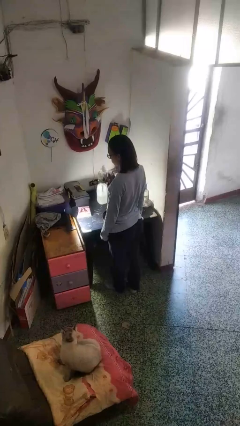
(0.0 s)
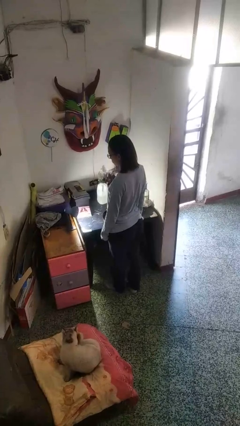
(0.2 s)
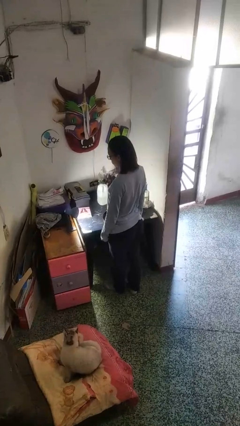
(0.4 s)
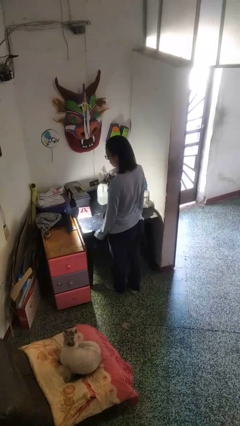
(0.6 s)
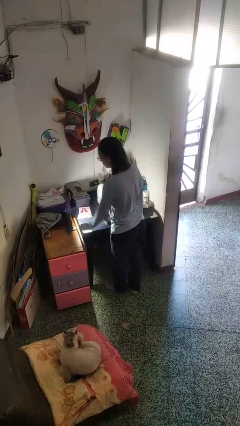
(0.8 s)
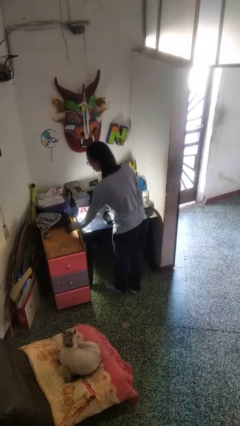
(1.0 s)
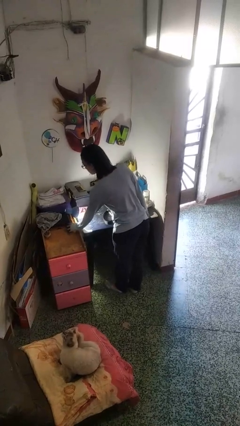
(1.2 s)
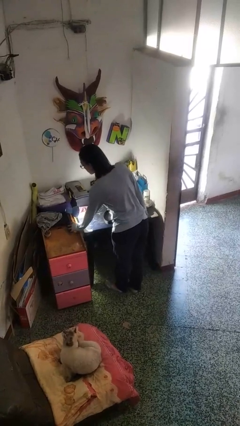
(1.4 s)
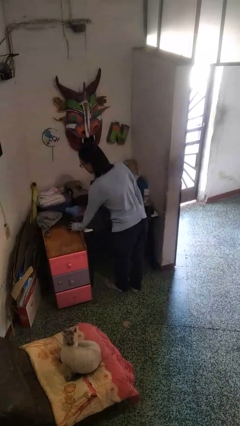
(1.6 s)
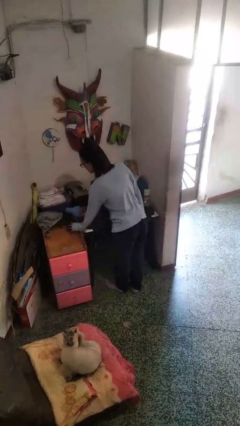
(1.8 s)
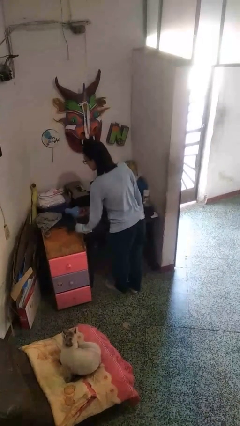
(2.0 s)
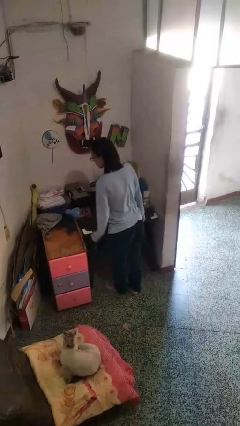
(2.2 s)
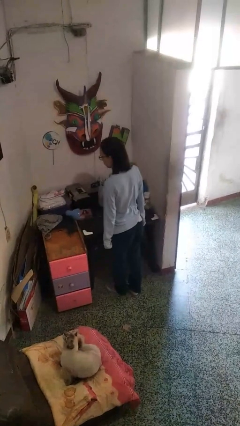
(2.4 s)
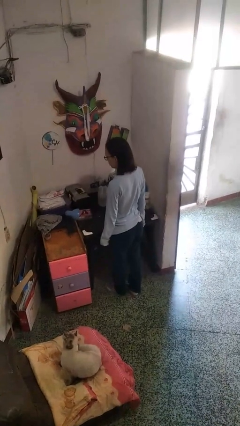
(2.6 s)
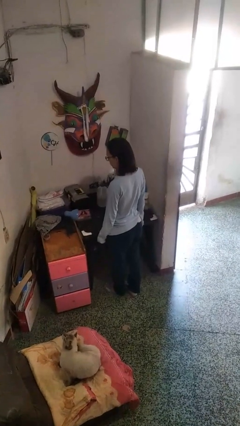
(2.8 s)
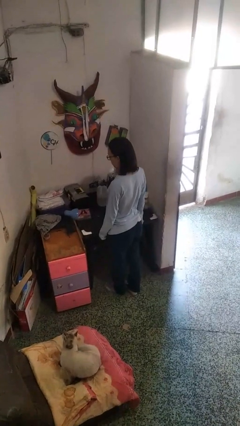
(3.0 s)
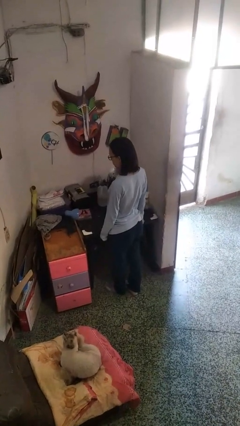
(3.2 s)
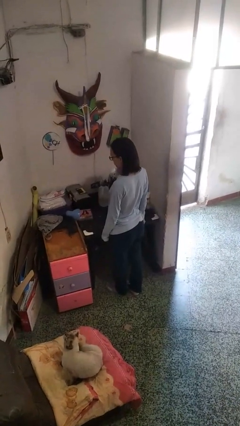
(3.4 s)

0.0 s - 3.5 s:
person turns off lamp

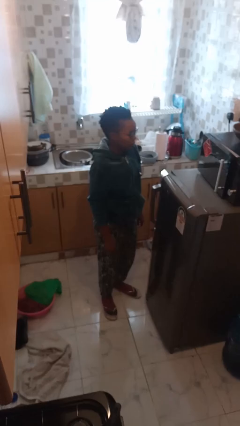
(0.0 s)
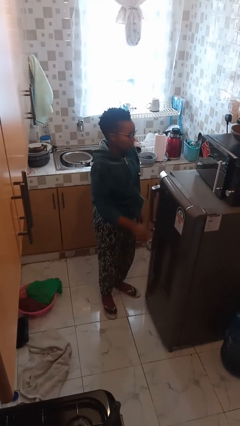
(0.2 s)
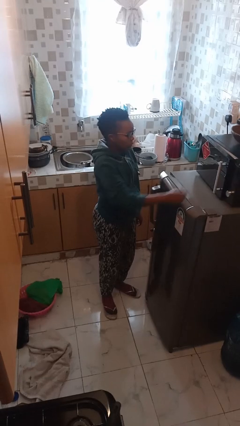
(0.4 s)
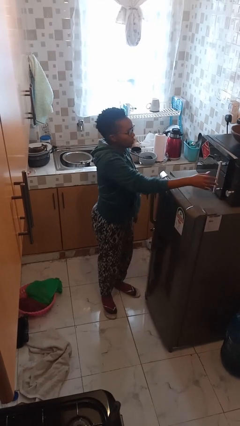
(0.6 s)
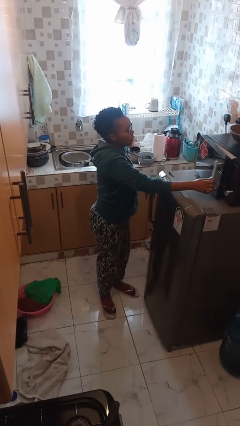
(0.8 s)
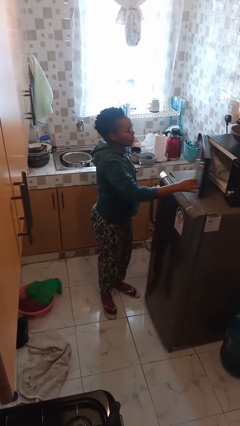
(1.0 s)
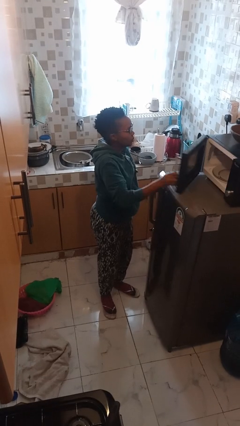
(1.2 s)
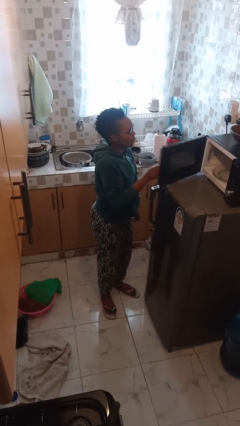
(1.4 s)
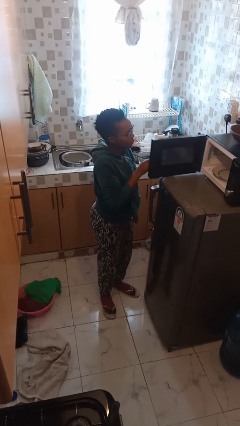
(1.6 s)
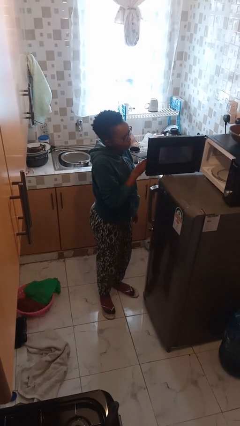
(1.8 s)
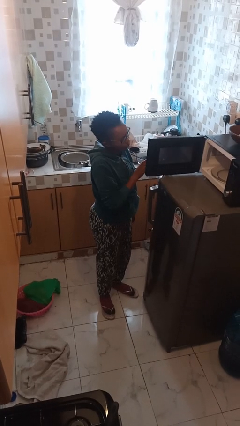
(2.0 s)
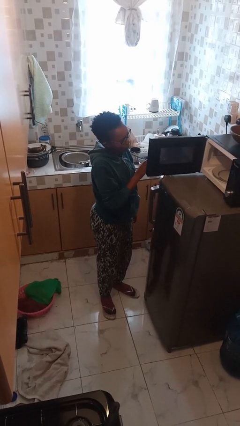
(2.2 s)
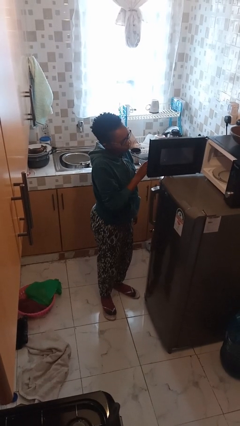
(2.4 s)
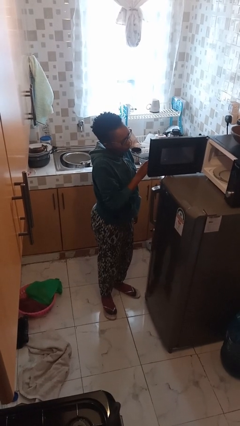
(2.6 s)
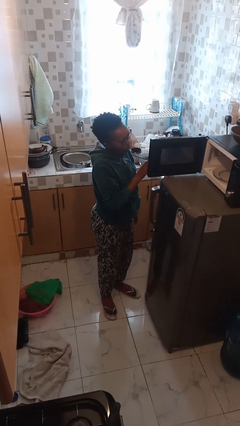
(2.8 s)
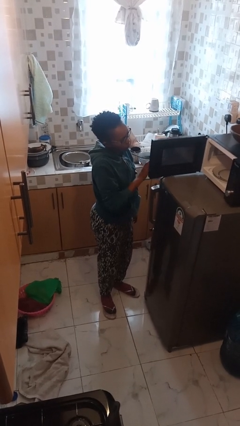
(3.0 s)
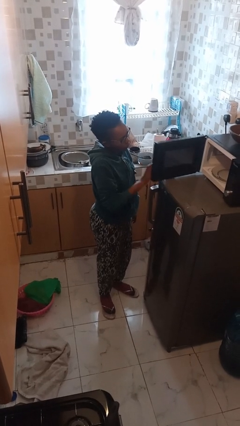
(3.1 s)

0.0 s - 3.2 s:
person opens microwave

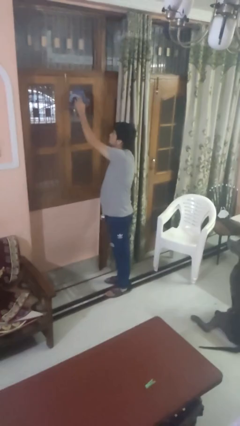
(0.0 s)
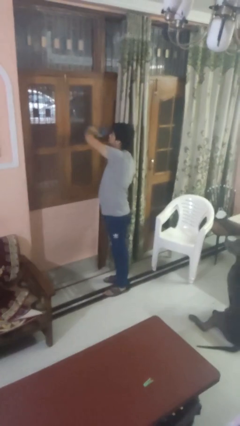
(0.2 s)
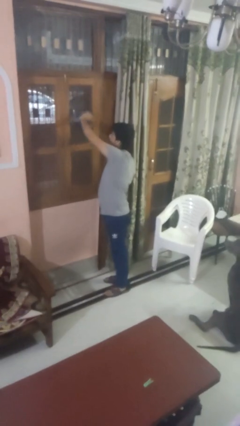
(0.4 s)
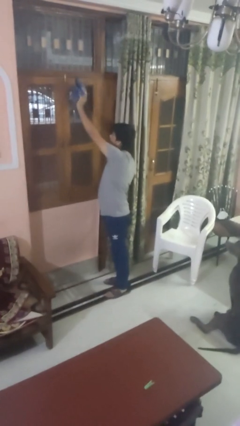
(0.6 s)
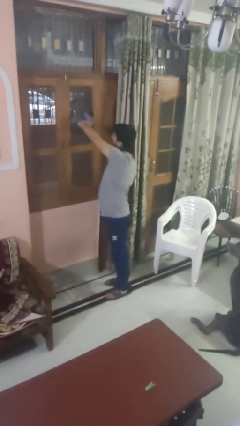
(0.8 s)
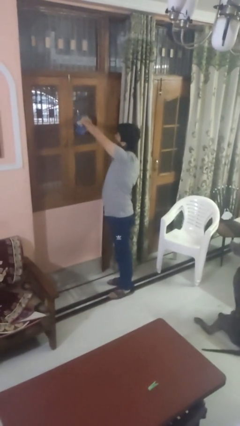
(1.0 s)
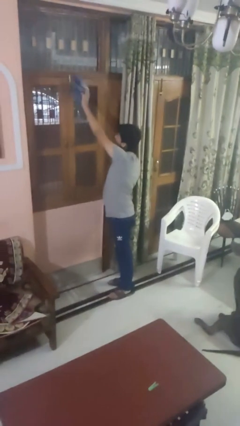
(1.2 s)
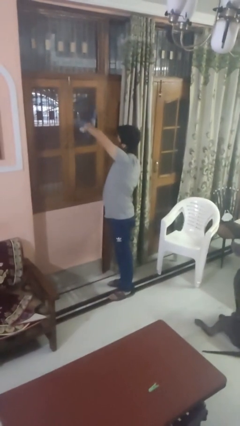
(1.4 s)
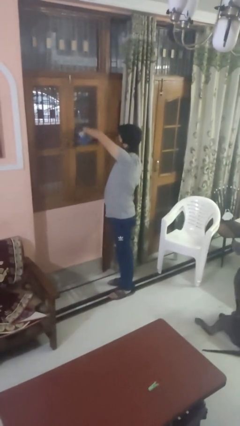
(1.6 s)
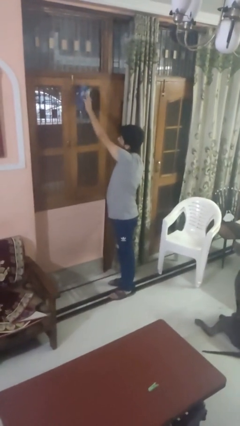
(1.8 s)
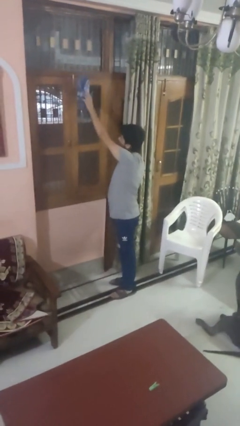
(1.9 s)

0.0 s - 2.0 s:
person washes window

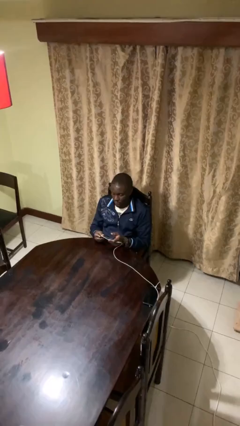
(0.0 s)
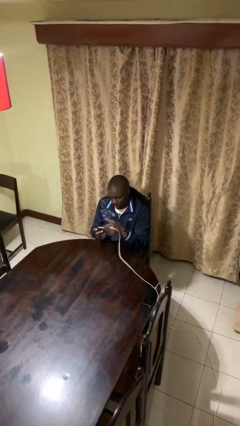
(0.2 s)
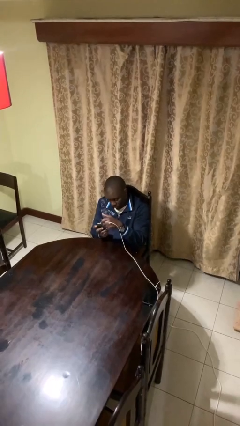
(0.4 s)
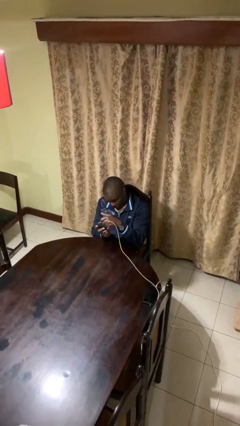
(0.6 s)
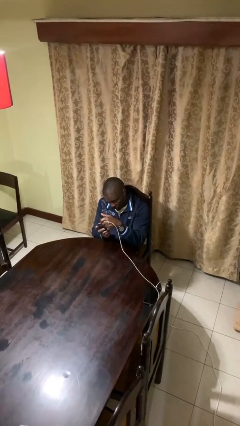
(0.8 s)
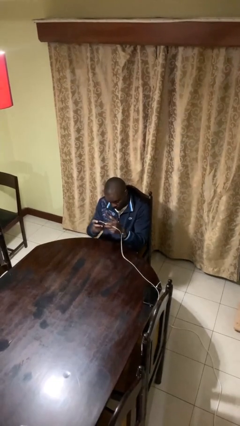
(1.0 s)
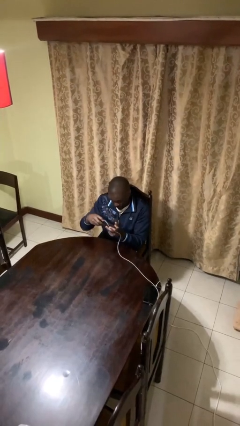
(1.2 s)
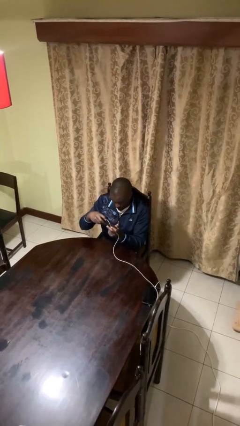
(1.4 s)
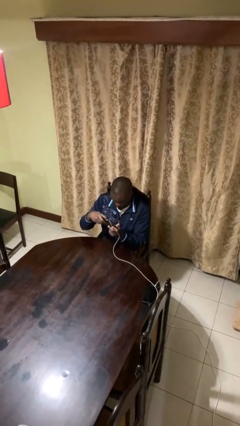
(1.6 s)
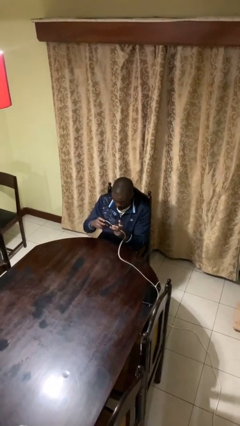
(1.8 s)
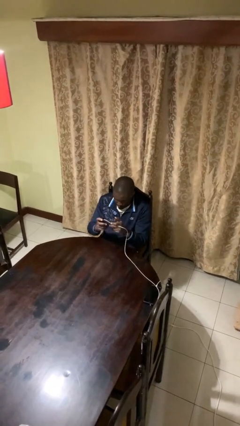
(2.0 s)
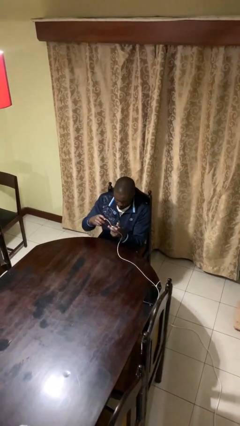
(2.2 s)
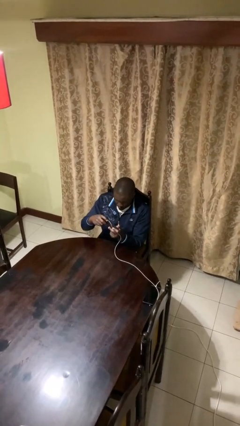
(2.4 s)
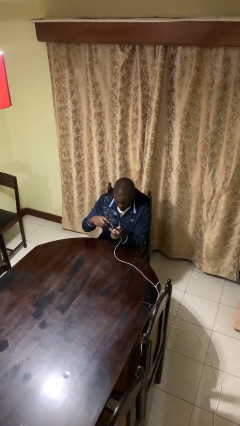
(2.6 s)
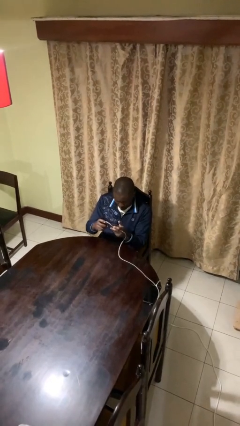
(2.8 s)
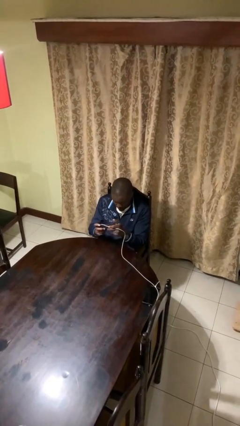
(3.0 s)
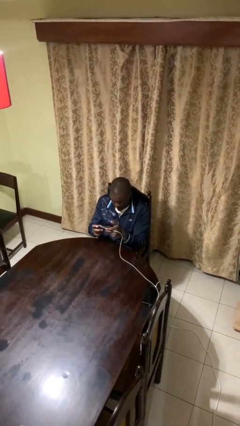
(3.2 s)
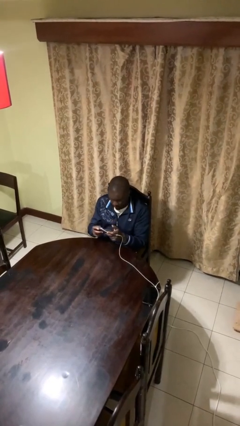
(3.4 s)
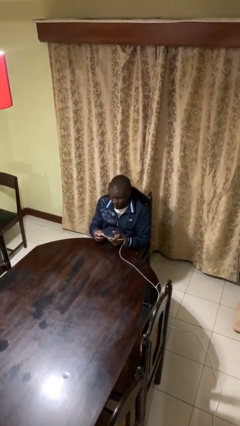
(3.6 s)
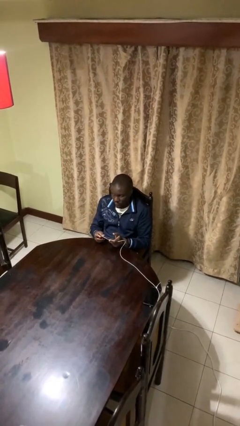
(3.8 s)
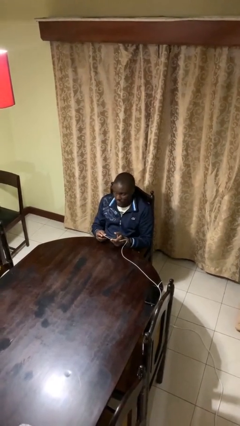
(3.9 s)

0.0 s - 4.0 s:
person interacts with handheld game

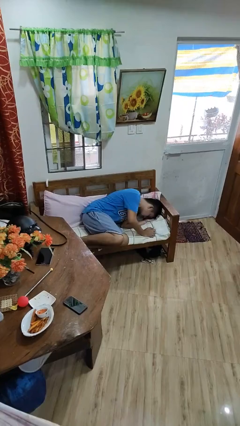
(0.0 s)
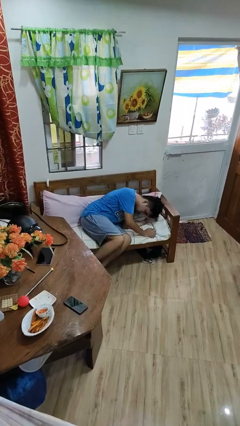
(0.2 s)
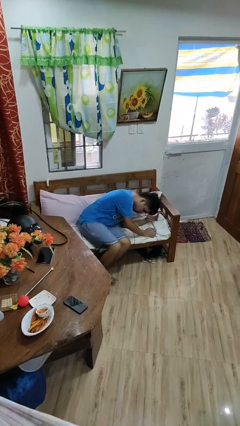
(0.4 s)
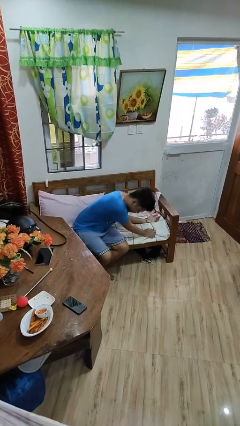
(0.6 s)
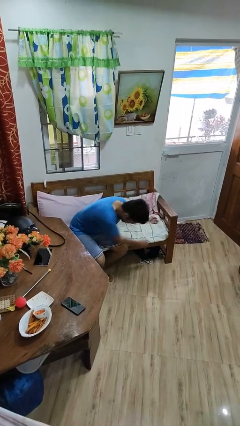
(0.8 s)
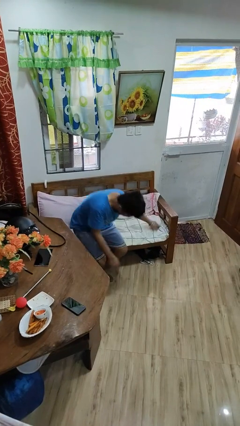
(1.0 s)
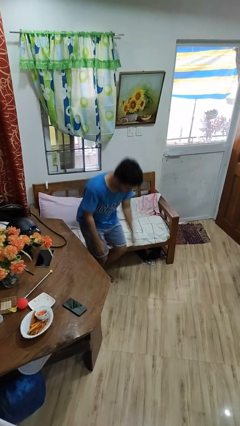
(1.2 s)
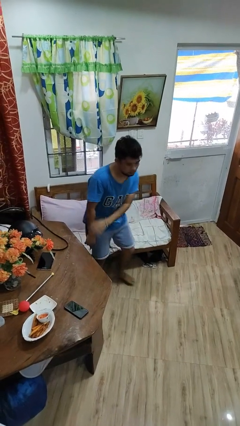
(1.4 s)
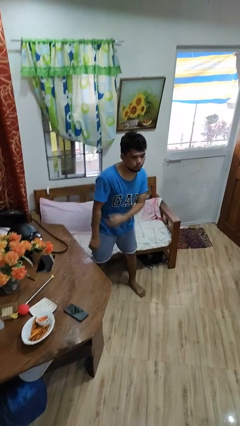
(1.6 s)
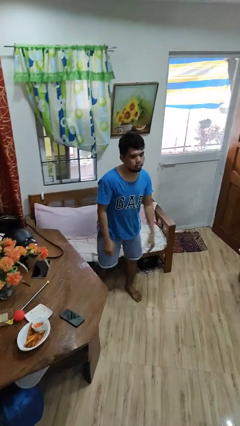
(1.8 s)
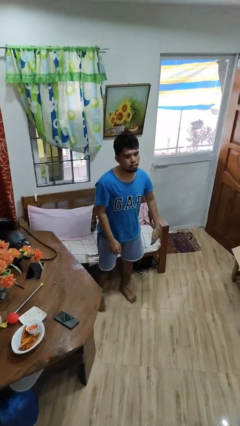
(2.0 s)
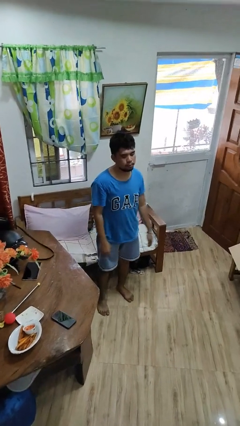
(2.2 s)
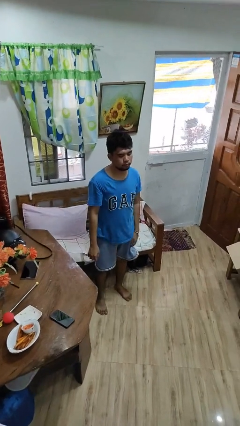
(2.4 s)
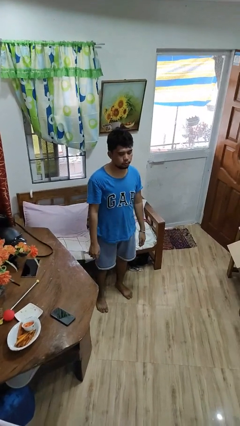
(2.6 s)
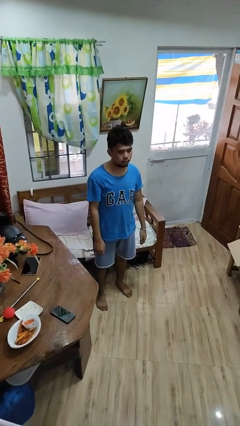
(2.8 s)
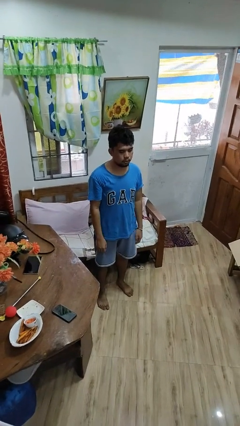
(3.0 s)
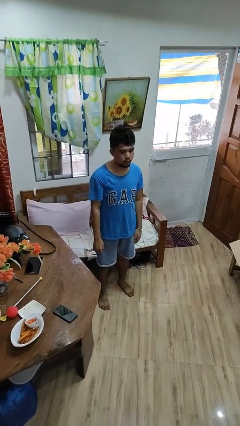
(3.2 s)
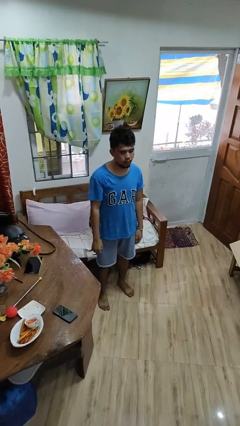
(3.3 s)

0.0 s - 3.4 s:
person stands up

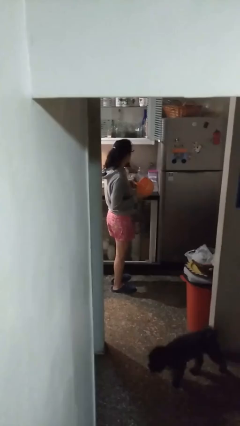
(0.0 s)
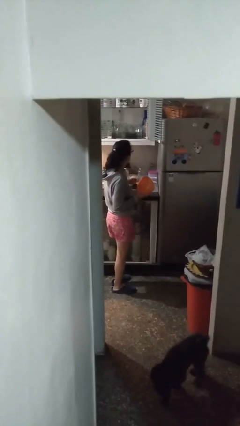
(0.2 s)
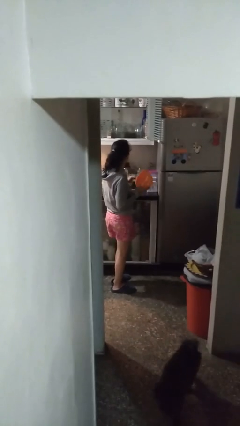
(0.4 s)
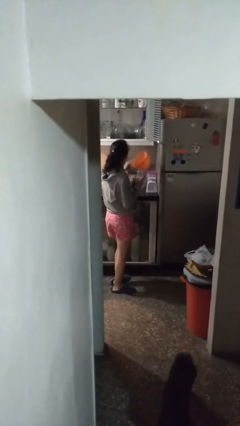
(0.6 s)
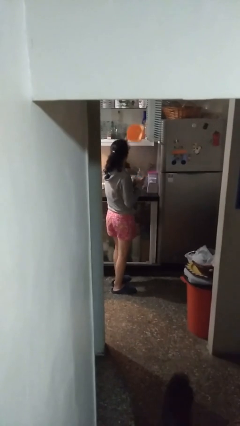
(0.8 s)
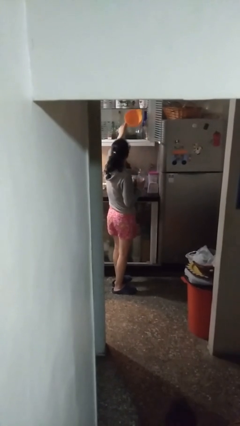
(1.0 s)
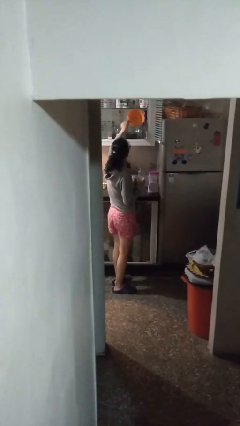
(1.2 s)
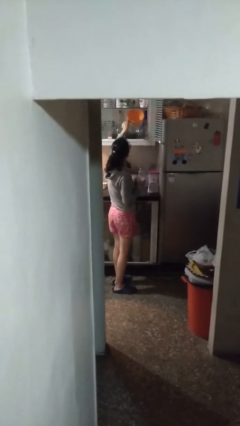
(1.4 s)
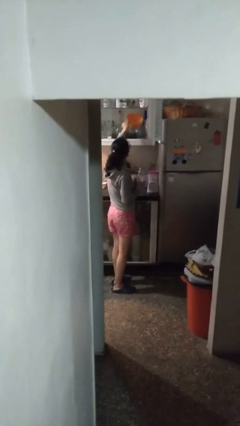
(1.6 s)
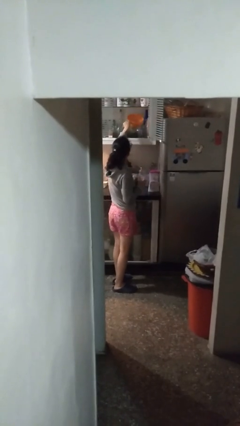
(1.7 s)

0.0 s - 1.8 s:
person puts down object into cabinet
